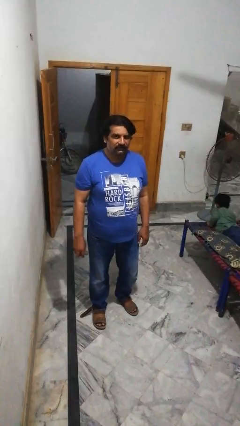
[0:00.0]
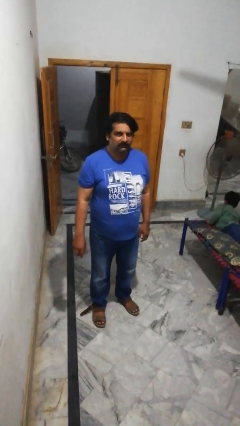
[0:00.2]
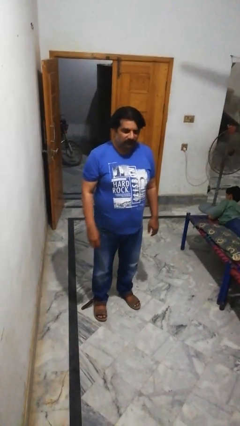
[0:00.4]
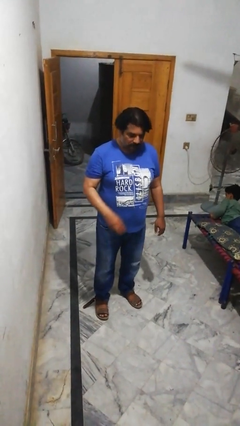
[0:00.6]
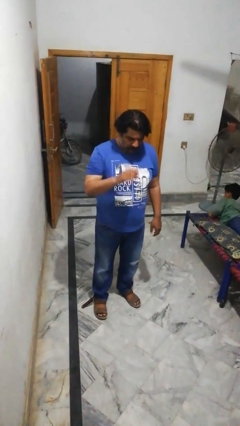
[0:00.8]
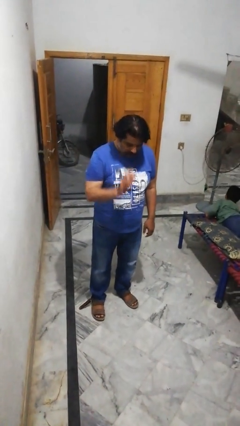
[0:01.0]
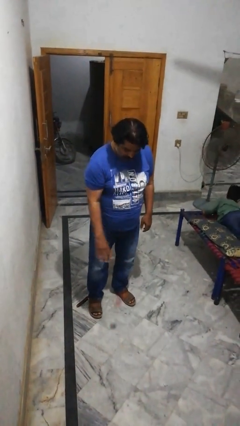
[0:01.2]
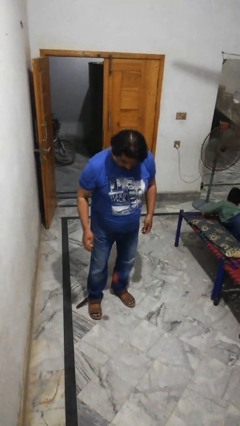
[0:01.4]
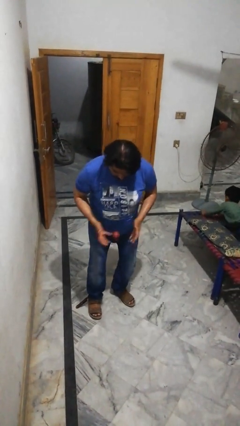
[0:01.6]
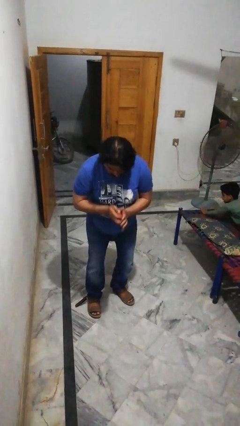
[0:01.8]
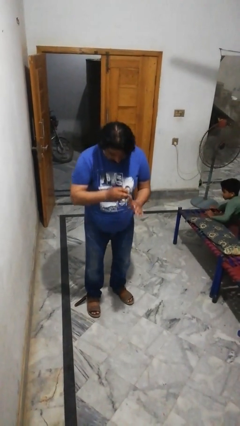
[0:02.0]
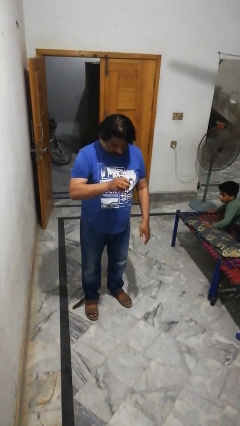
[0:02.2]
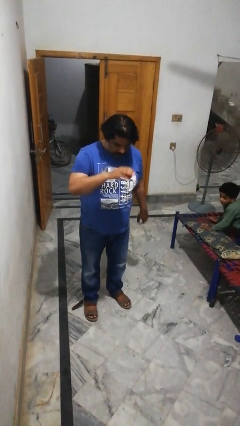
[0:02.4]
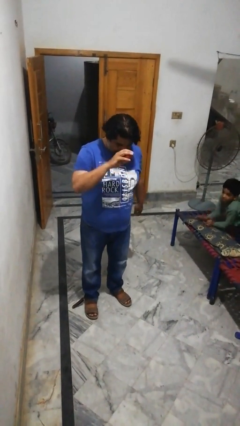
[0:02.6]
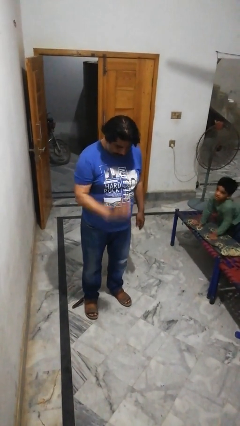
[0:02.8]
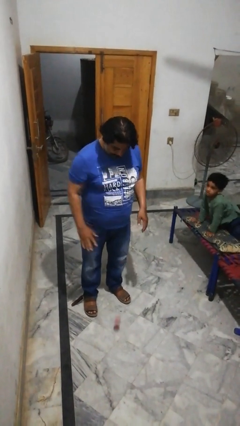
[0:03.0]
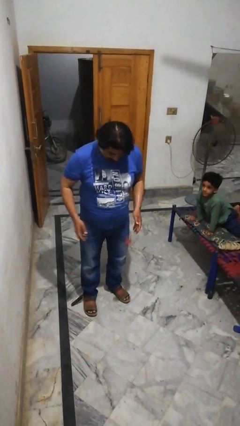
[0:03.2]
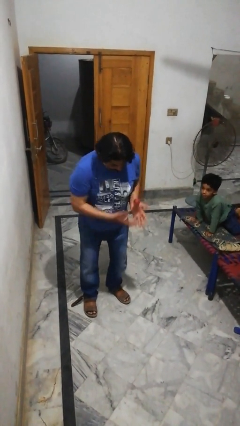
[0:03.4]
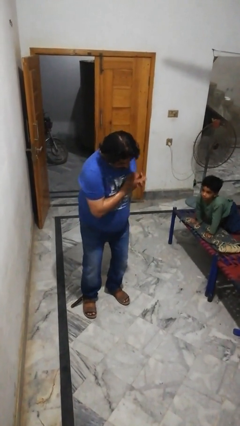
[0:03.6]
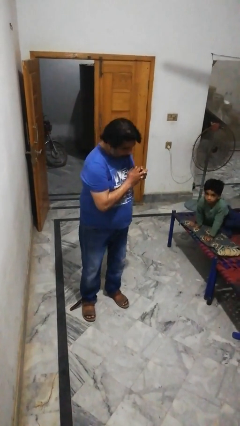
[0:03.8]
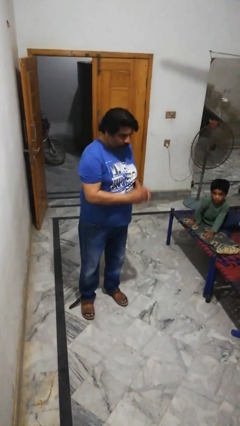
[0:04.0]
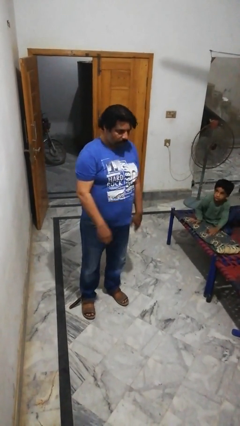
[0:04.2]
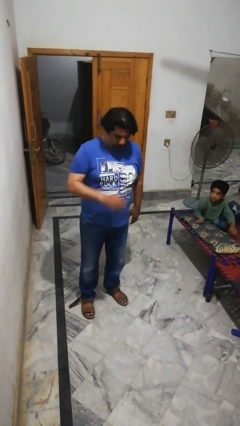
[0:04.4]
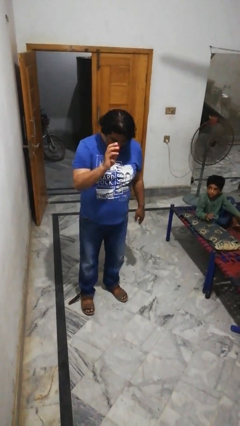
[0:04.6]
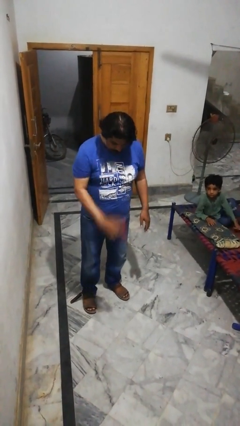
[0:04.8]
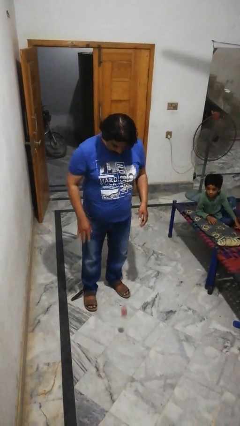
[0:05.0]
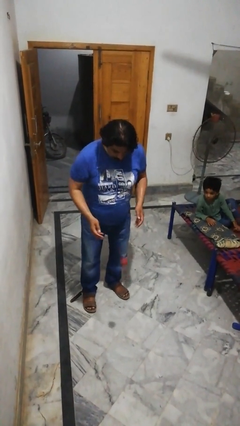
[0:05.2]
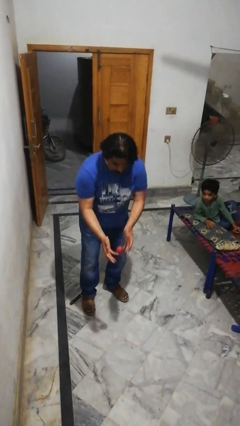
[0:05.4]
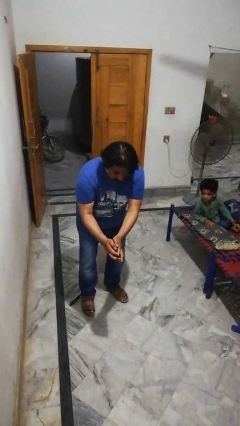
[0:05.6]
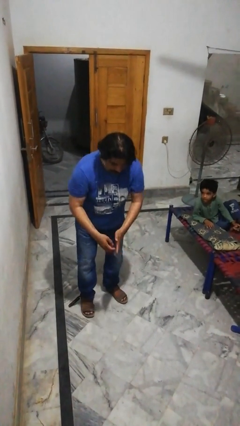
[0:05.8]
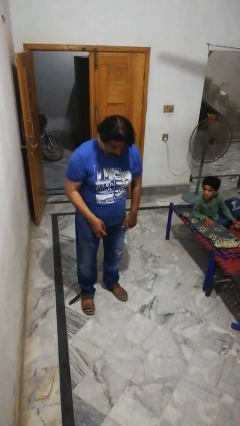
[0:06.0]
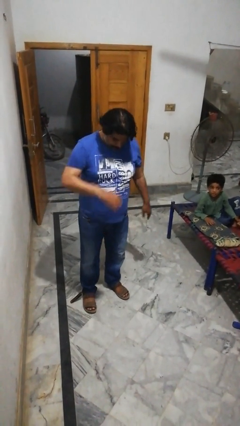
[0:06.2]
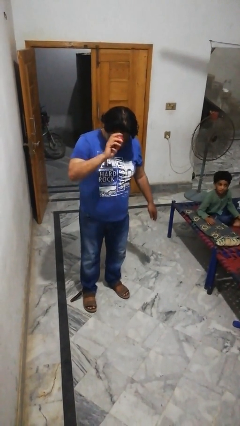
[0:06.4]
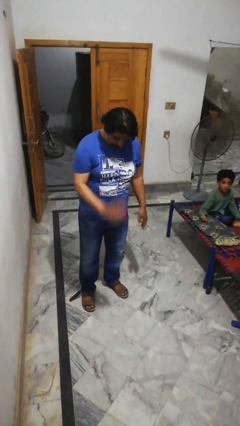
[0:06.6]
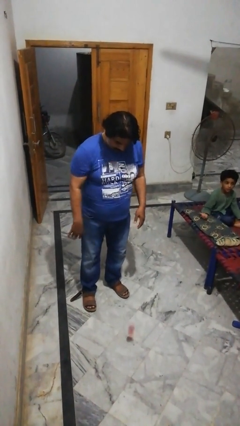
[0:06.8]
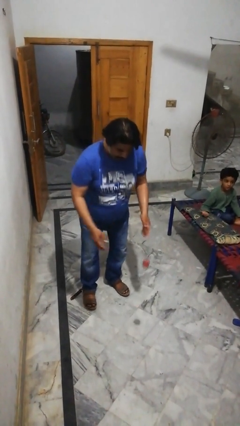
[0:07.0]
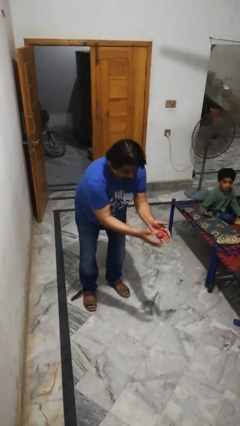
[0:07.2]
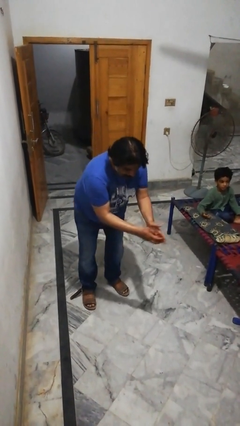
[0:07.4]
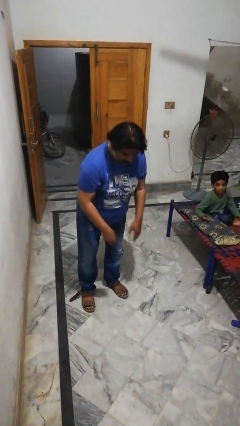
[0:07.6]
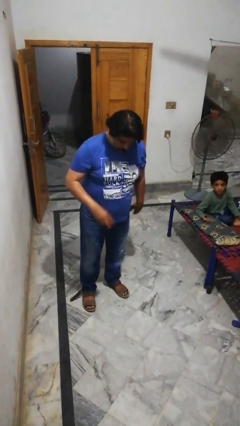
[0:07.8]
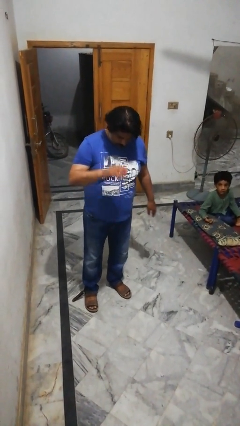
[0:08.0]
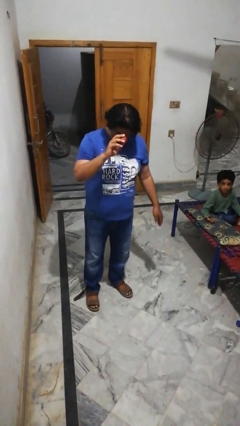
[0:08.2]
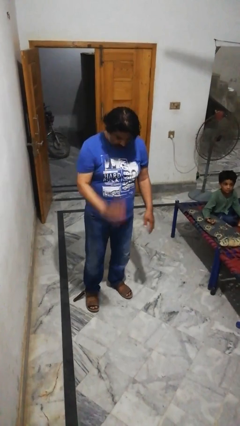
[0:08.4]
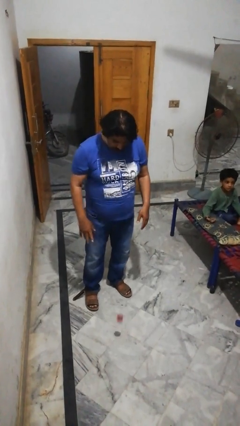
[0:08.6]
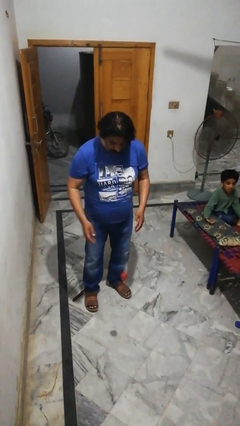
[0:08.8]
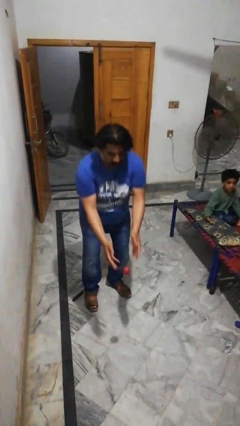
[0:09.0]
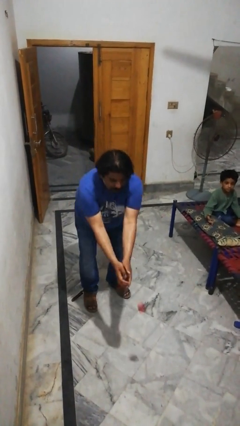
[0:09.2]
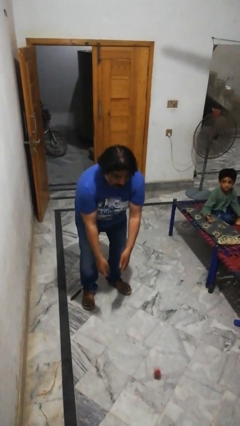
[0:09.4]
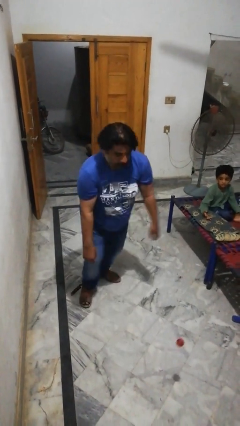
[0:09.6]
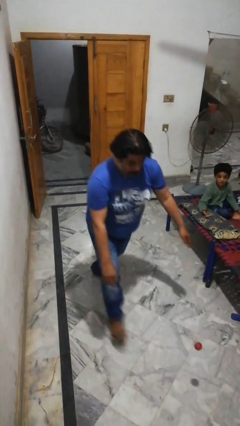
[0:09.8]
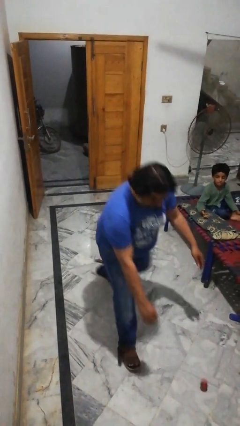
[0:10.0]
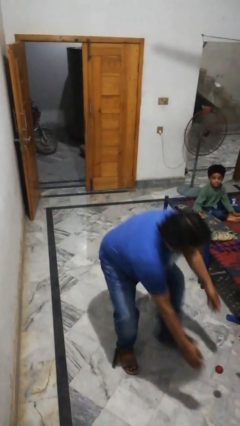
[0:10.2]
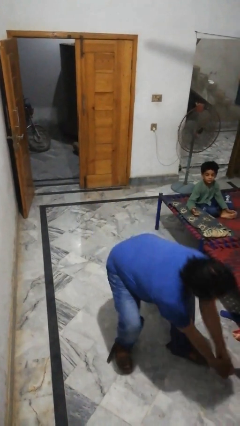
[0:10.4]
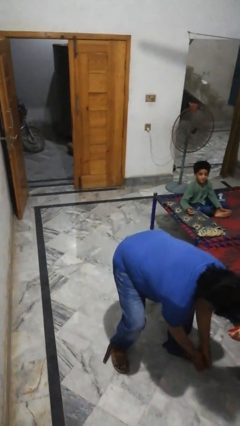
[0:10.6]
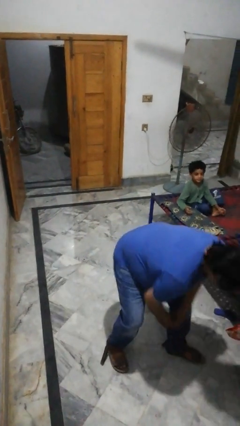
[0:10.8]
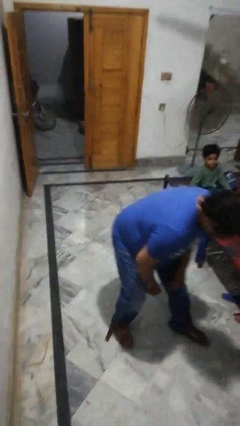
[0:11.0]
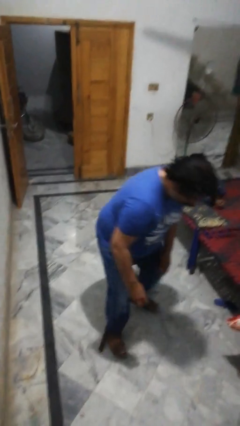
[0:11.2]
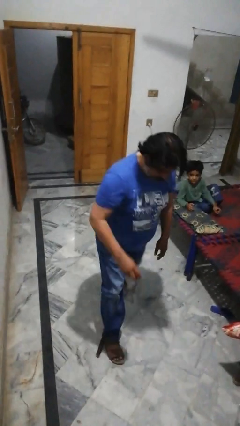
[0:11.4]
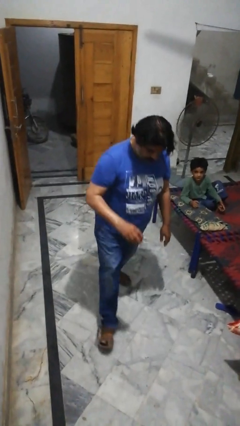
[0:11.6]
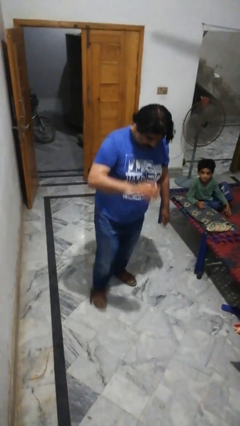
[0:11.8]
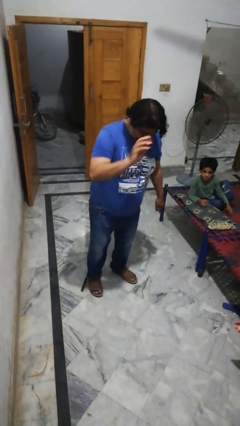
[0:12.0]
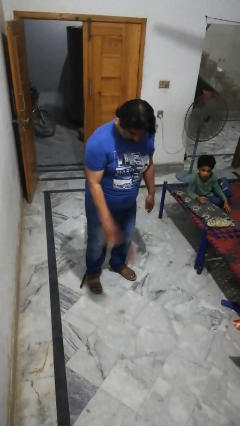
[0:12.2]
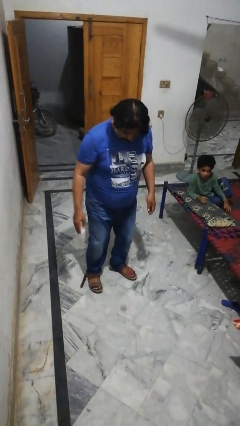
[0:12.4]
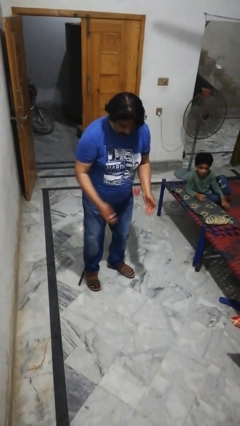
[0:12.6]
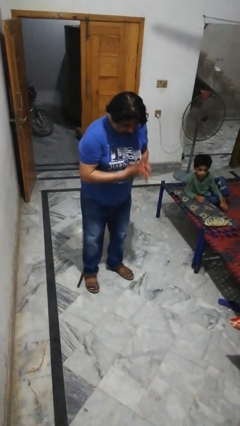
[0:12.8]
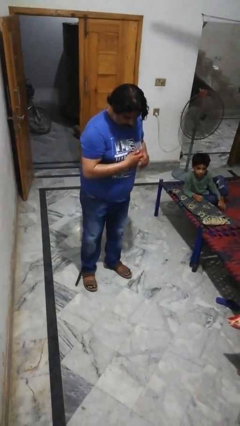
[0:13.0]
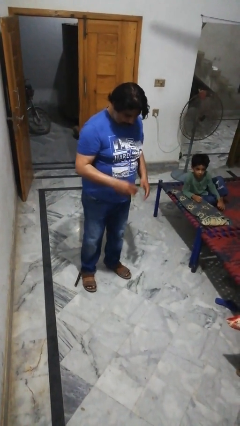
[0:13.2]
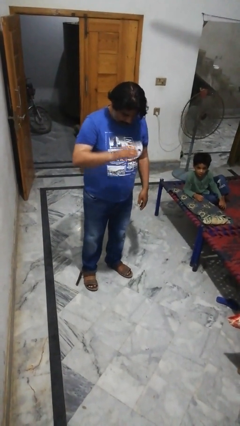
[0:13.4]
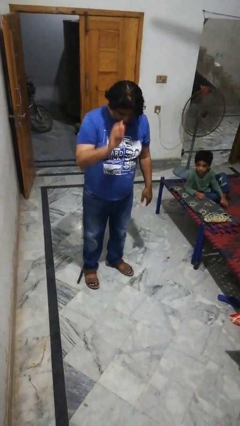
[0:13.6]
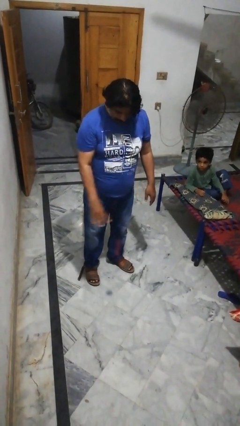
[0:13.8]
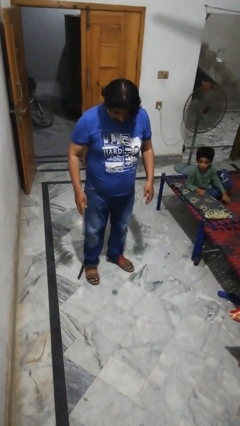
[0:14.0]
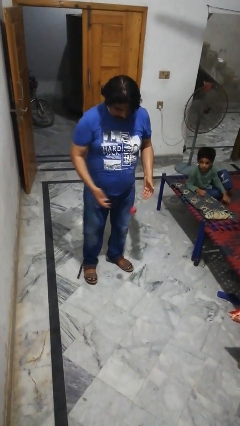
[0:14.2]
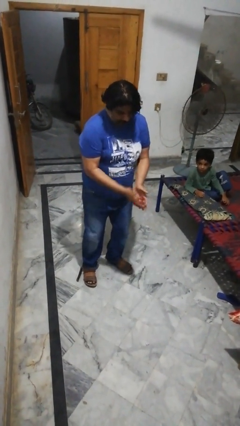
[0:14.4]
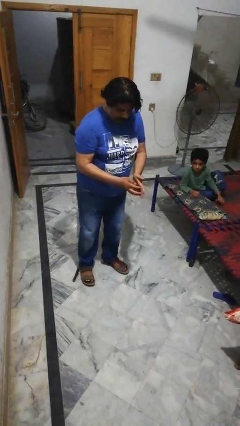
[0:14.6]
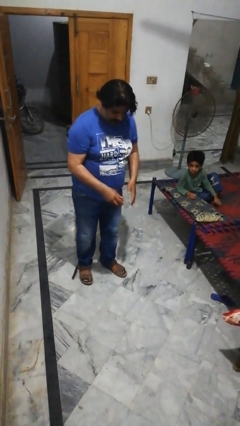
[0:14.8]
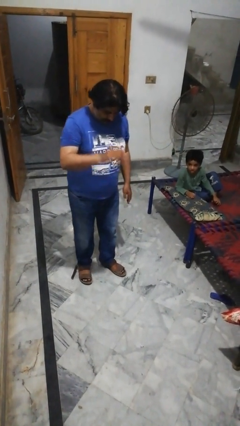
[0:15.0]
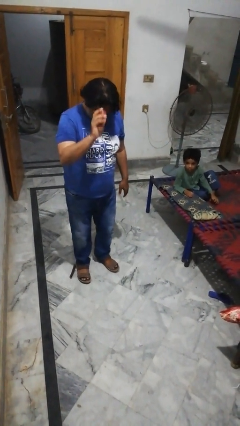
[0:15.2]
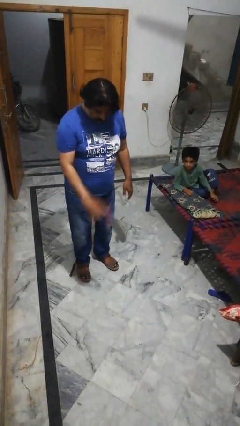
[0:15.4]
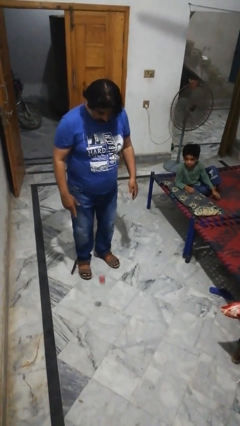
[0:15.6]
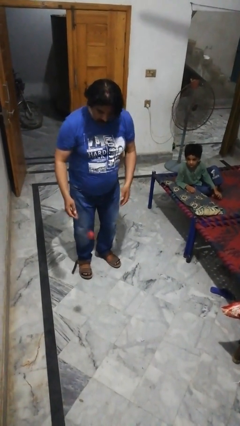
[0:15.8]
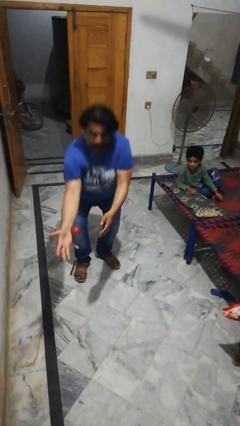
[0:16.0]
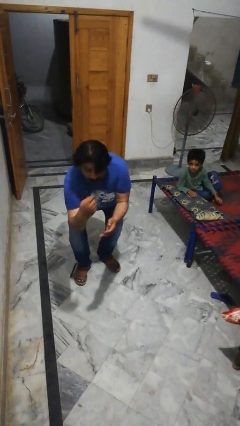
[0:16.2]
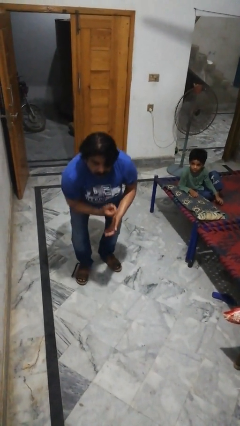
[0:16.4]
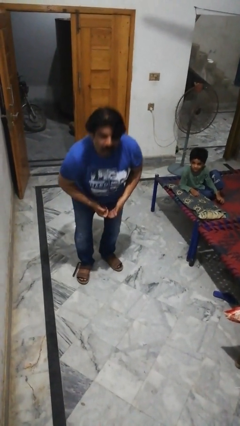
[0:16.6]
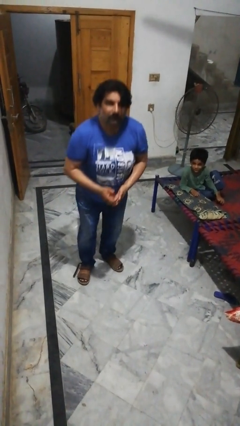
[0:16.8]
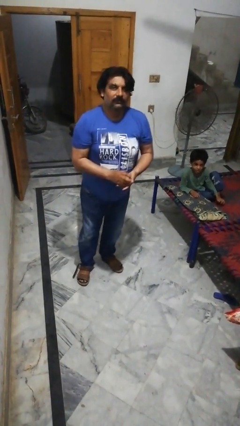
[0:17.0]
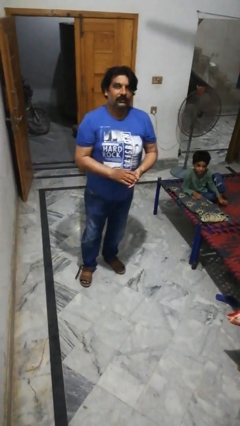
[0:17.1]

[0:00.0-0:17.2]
person bounces ball on floor

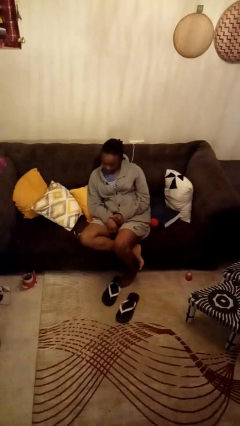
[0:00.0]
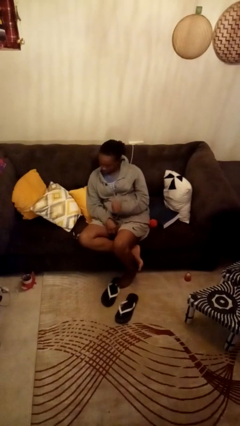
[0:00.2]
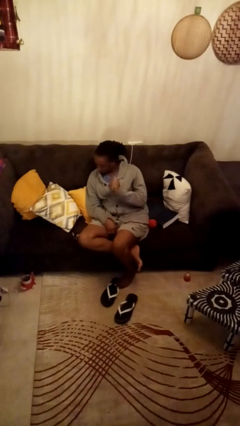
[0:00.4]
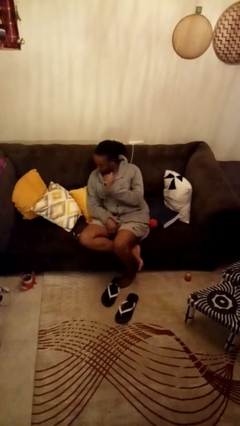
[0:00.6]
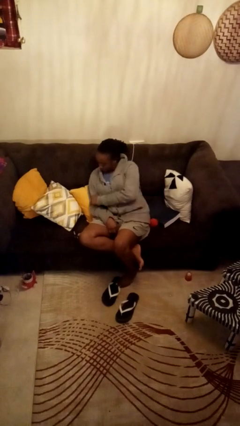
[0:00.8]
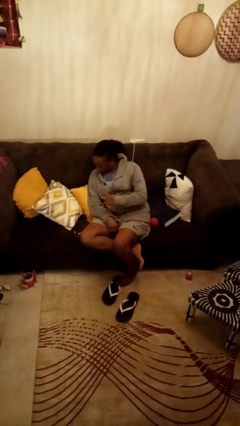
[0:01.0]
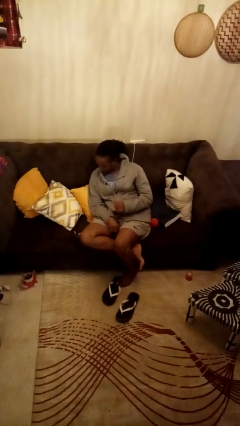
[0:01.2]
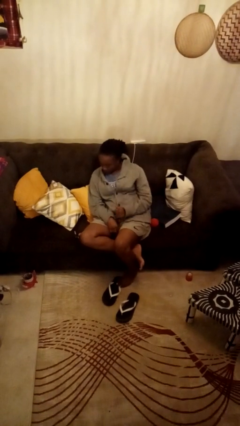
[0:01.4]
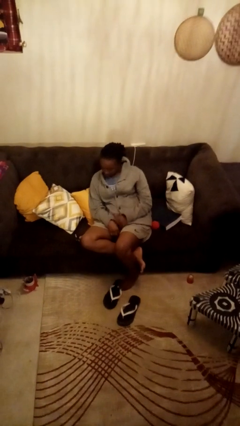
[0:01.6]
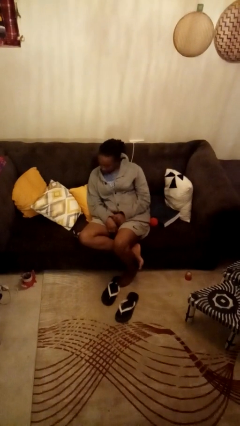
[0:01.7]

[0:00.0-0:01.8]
person swats bug
